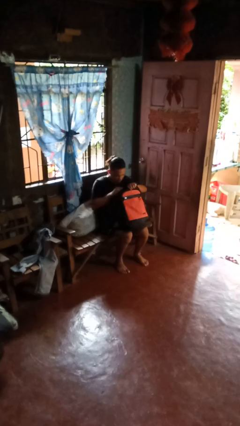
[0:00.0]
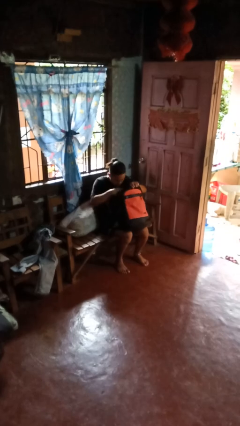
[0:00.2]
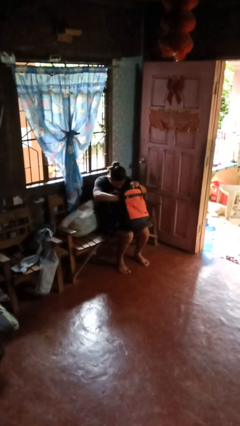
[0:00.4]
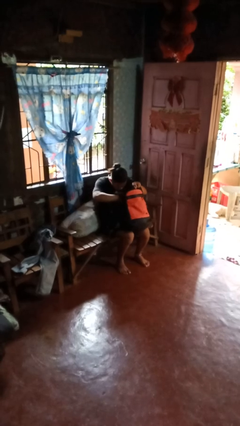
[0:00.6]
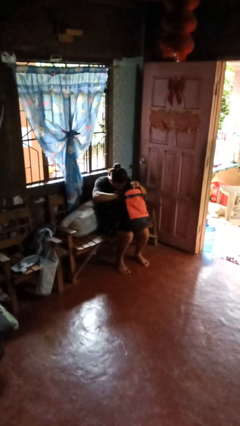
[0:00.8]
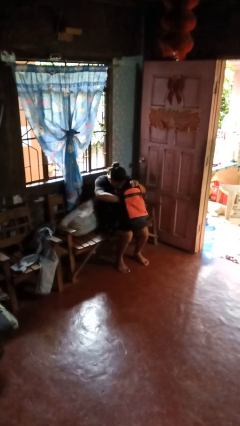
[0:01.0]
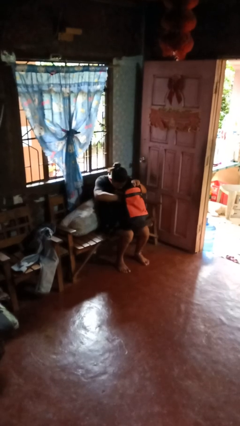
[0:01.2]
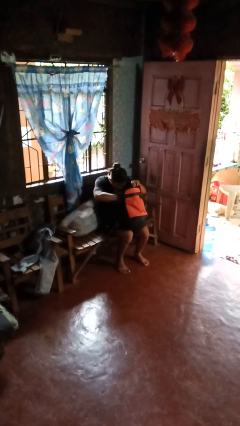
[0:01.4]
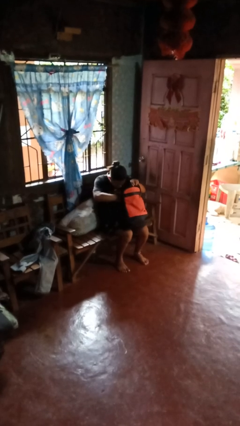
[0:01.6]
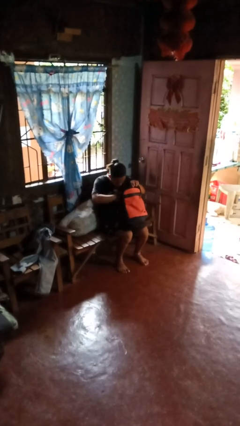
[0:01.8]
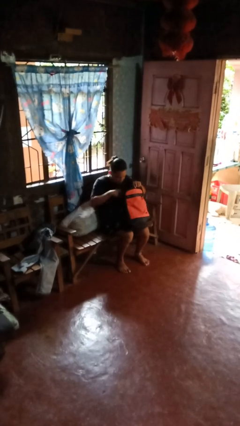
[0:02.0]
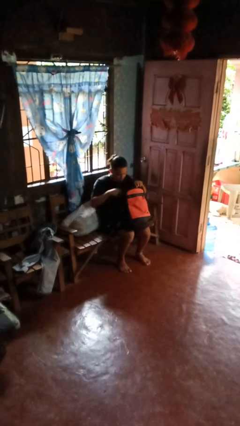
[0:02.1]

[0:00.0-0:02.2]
person searches in bag

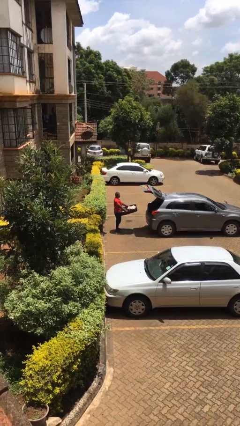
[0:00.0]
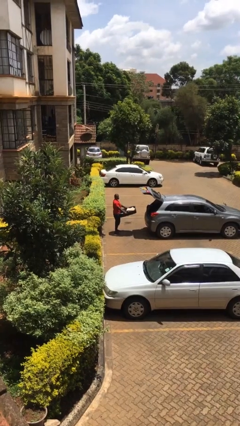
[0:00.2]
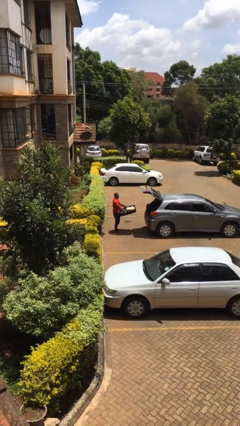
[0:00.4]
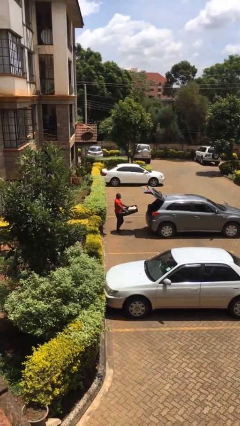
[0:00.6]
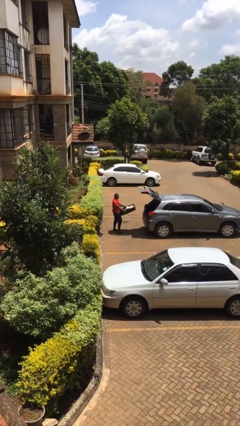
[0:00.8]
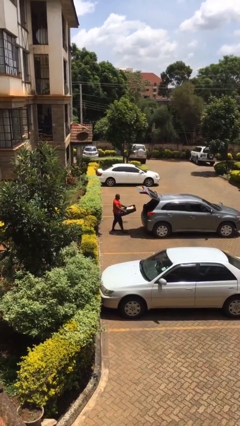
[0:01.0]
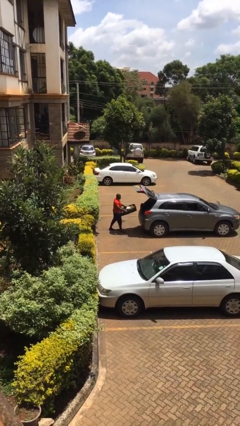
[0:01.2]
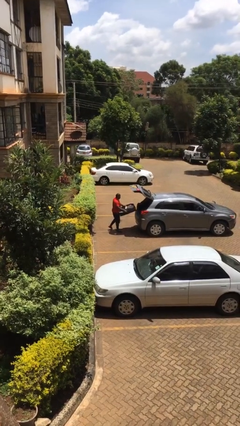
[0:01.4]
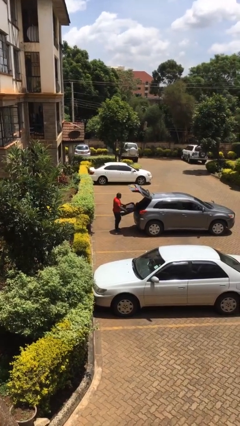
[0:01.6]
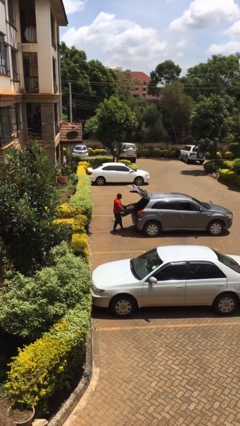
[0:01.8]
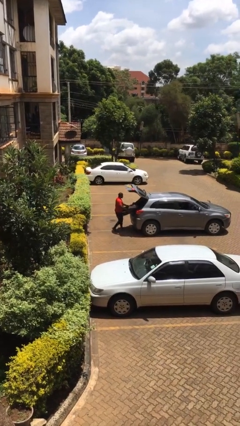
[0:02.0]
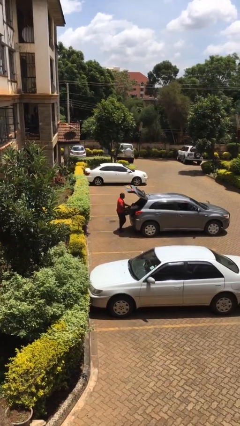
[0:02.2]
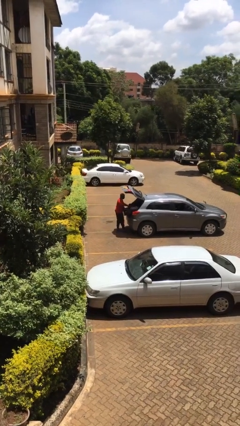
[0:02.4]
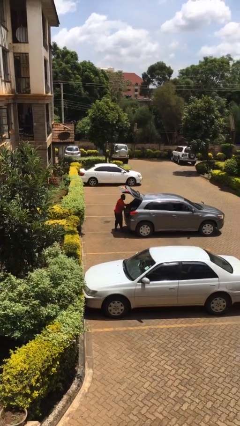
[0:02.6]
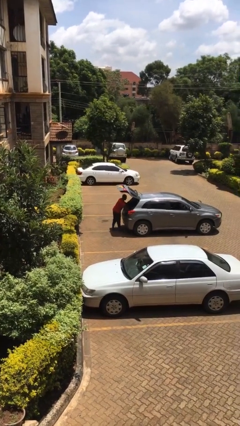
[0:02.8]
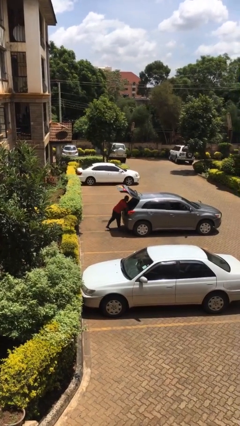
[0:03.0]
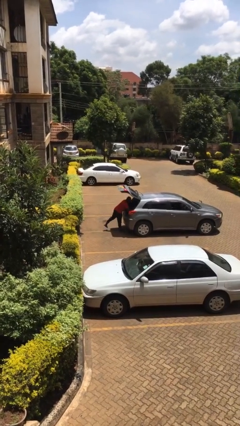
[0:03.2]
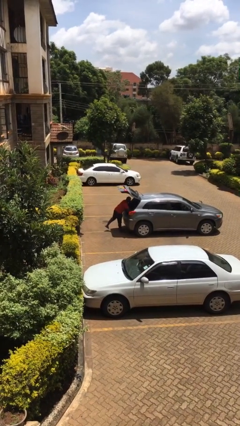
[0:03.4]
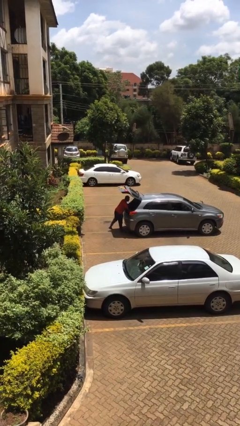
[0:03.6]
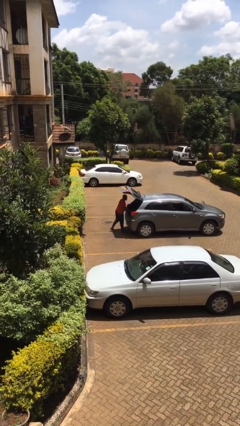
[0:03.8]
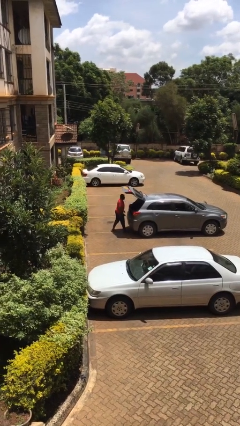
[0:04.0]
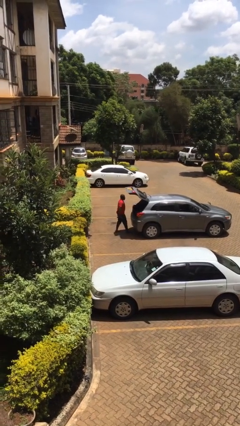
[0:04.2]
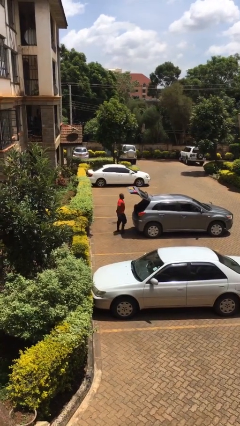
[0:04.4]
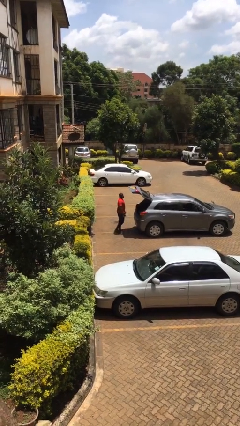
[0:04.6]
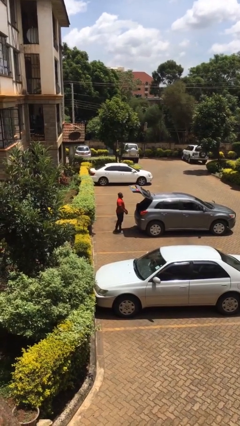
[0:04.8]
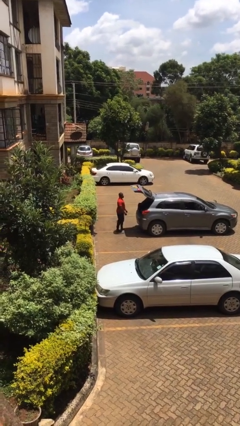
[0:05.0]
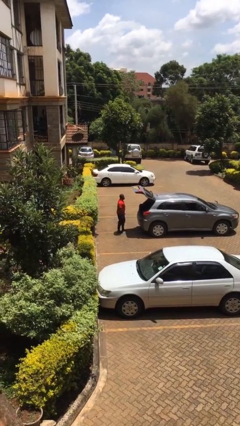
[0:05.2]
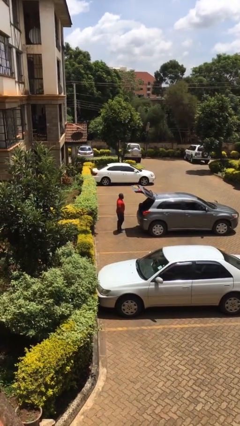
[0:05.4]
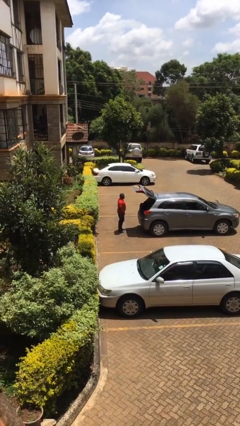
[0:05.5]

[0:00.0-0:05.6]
person loads car

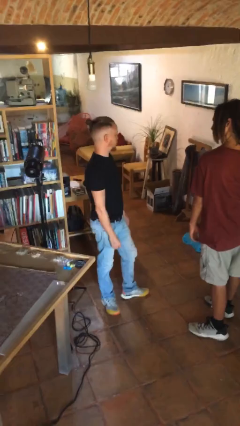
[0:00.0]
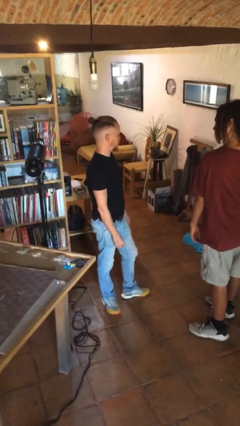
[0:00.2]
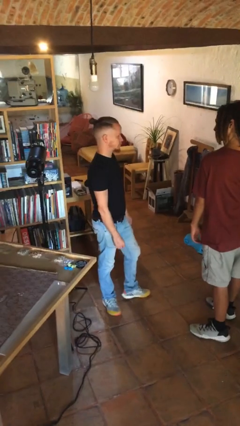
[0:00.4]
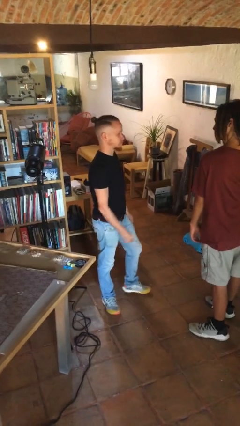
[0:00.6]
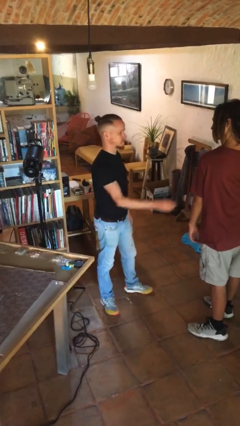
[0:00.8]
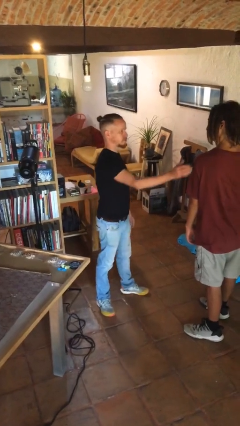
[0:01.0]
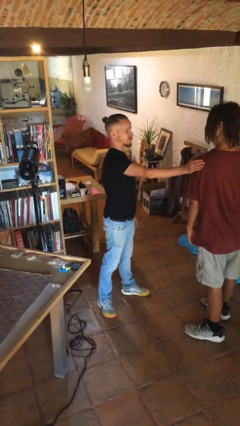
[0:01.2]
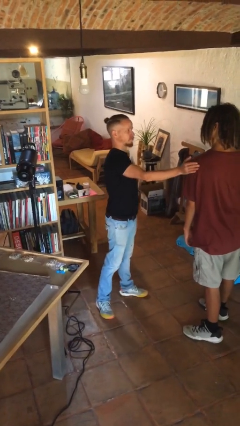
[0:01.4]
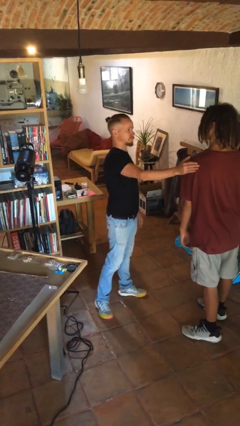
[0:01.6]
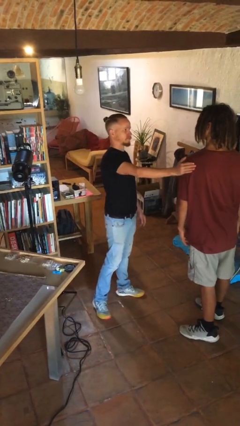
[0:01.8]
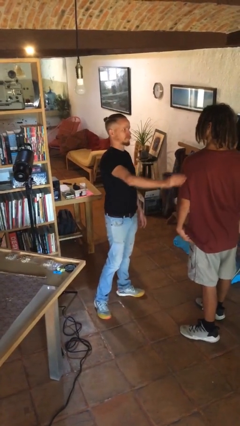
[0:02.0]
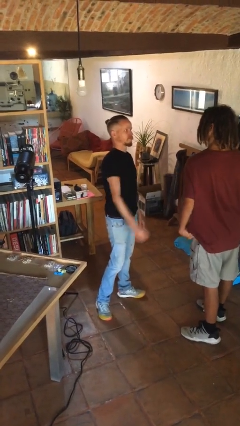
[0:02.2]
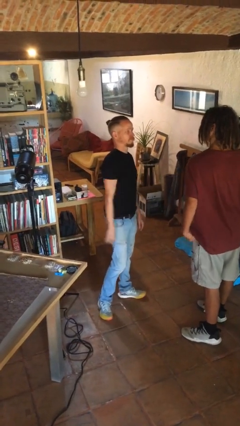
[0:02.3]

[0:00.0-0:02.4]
person pounds shoulders of person

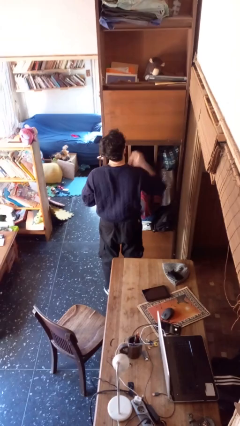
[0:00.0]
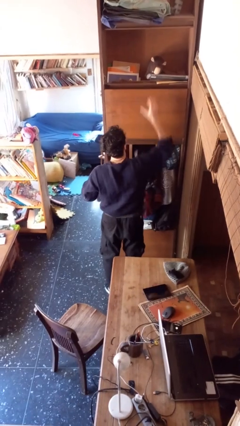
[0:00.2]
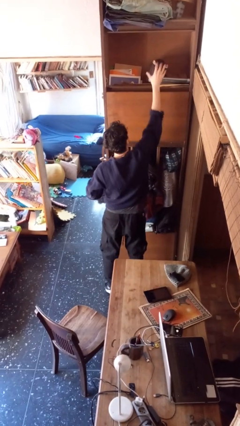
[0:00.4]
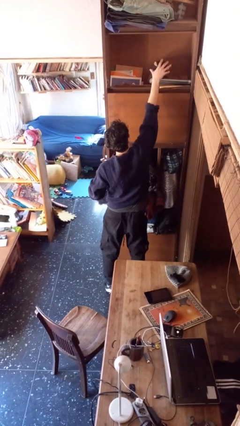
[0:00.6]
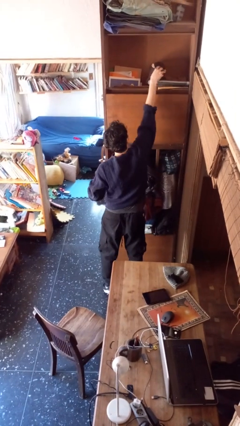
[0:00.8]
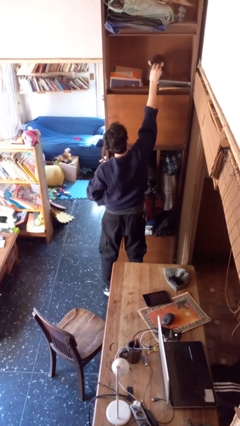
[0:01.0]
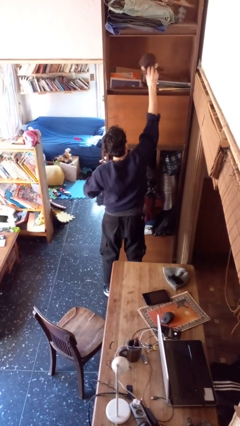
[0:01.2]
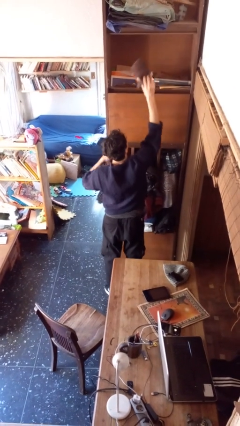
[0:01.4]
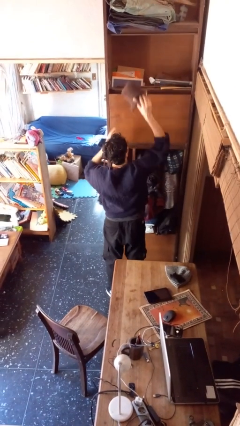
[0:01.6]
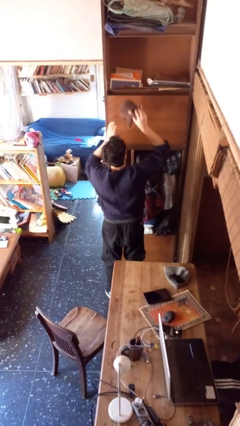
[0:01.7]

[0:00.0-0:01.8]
person picks up object from shelf

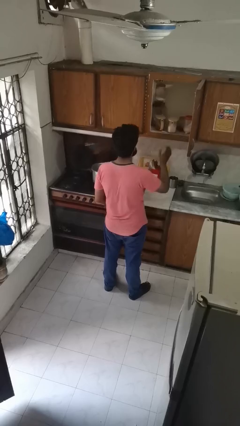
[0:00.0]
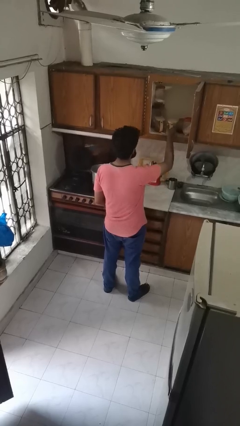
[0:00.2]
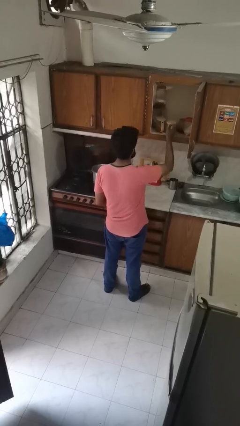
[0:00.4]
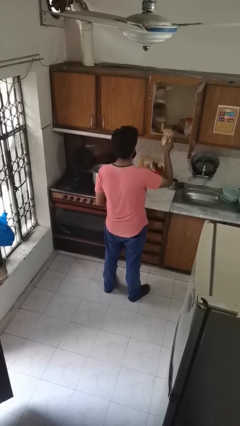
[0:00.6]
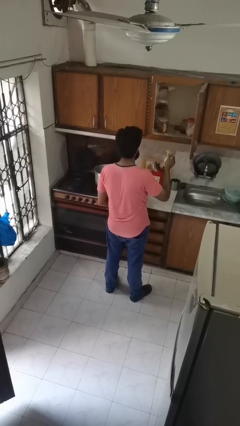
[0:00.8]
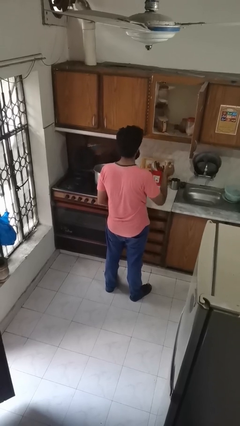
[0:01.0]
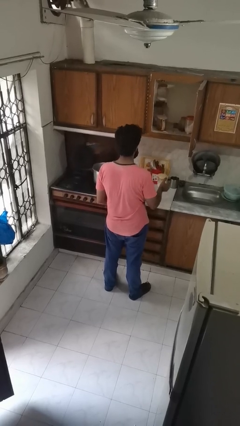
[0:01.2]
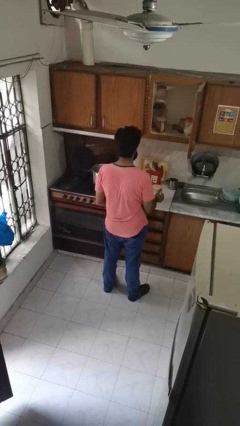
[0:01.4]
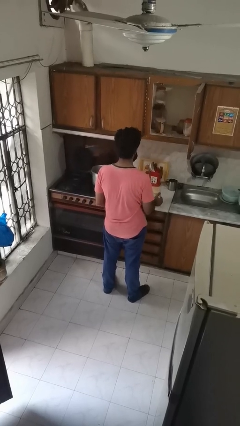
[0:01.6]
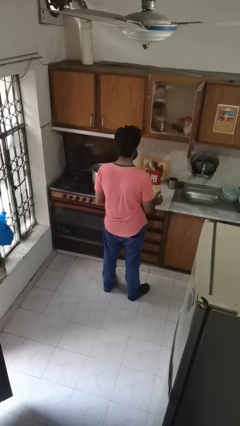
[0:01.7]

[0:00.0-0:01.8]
person picks up object from cabinet

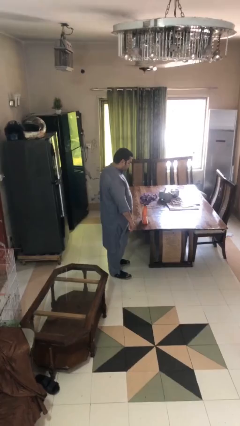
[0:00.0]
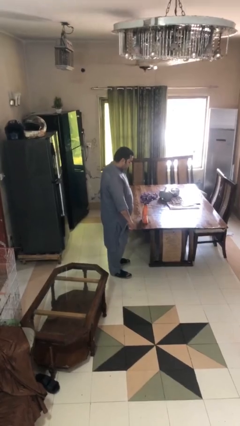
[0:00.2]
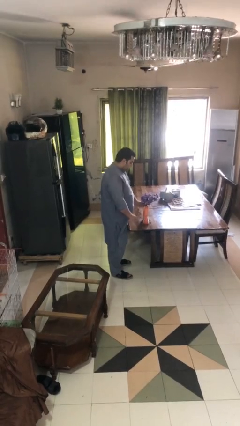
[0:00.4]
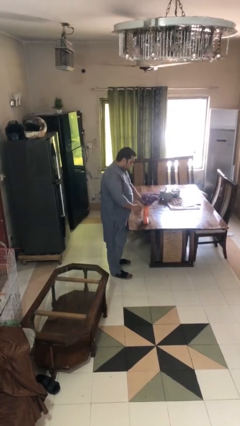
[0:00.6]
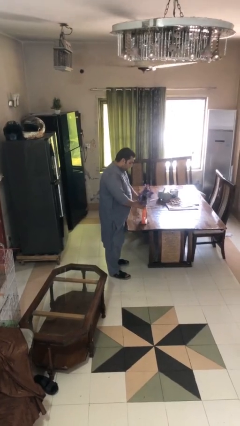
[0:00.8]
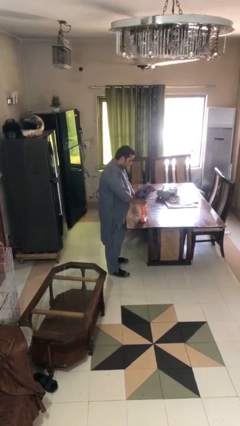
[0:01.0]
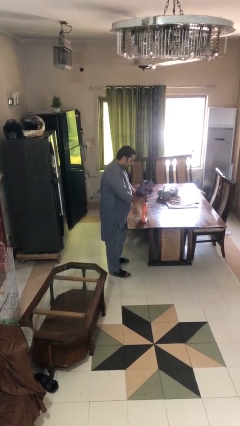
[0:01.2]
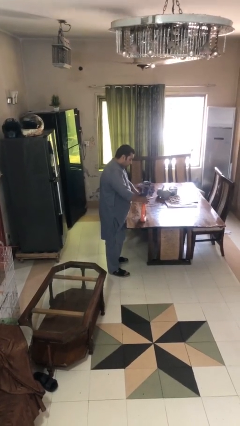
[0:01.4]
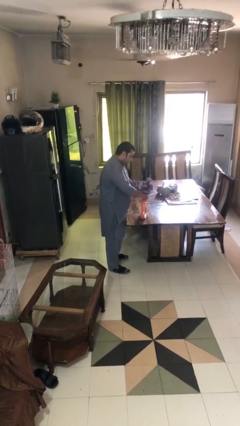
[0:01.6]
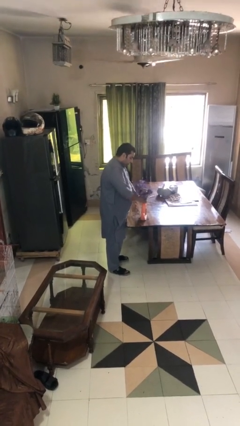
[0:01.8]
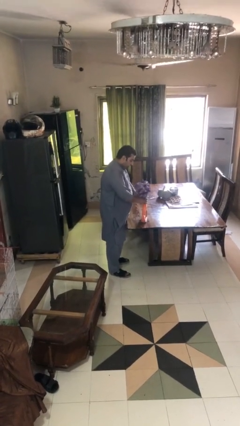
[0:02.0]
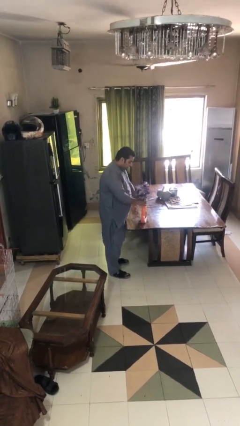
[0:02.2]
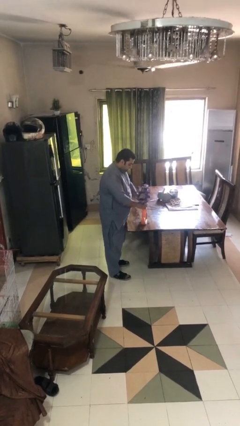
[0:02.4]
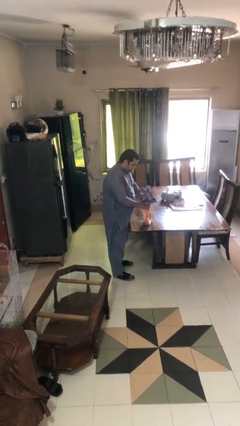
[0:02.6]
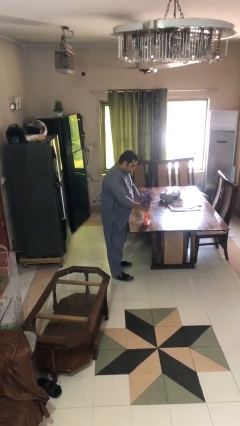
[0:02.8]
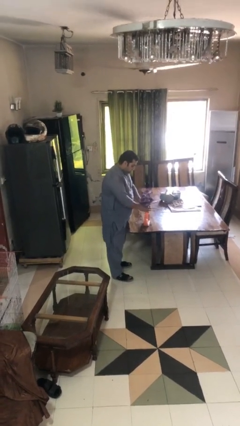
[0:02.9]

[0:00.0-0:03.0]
person arranges flowers in vase

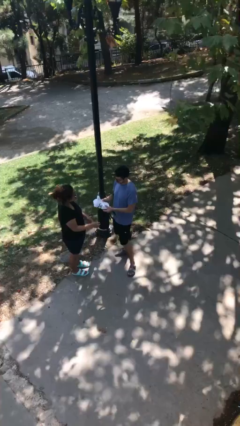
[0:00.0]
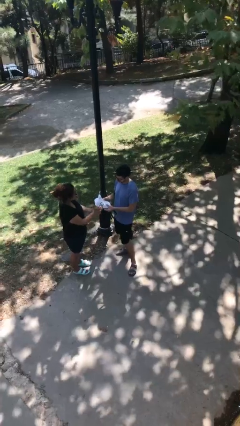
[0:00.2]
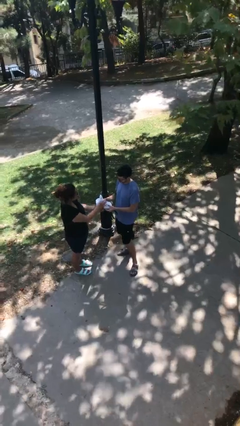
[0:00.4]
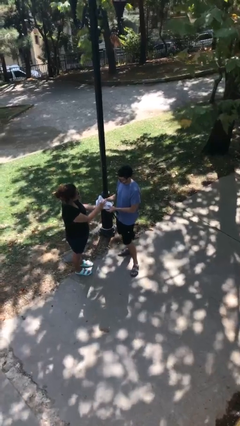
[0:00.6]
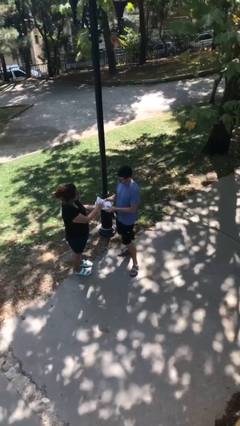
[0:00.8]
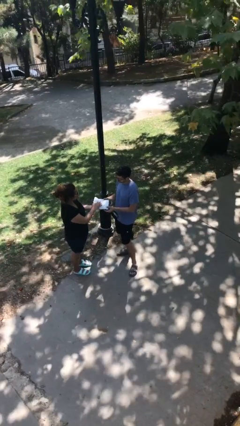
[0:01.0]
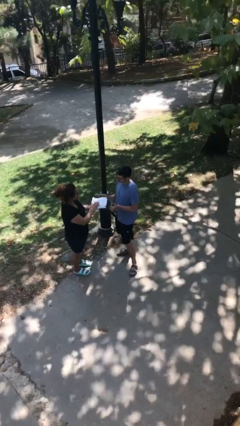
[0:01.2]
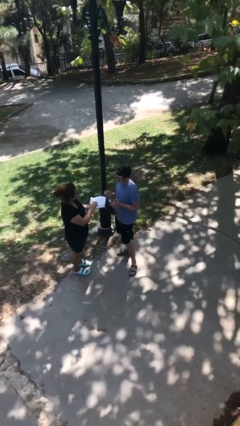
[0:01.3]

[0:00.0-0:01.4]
person transfers object to person
